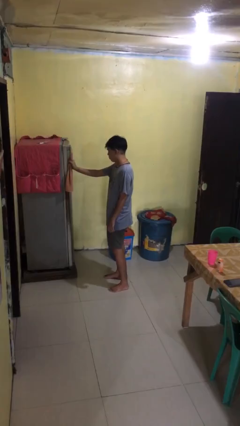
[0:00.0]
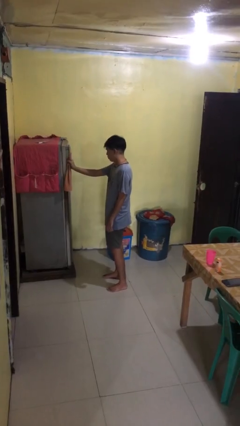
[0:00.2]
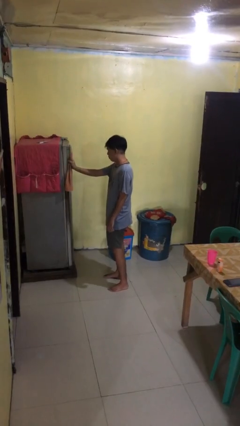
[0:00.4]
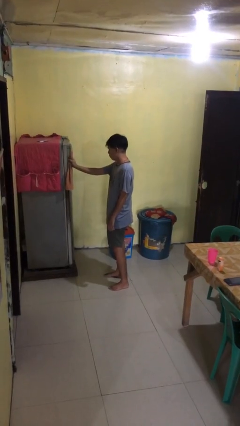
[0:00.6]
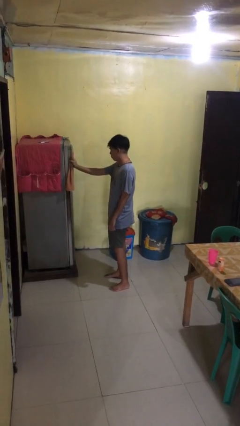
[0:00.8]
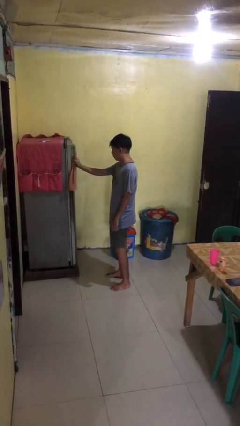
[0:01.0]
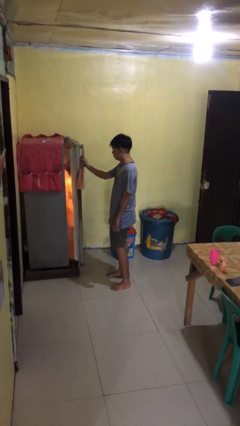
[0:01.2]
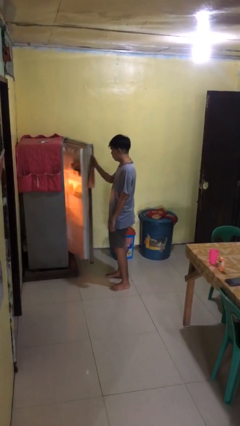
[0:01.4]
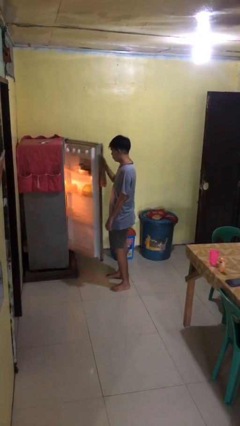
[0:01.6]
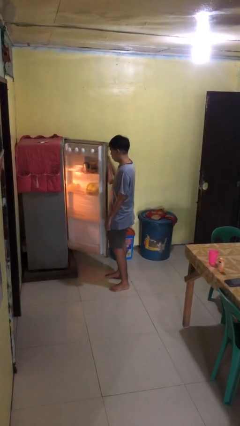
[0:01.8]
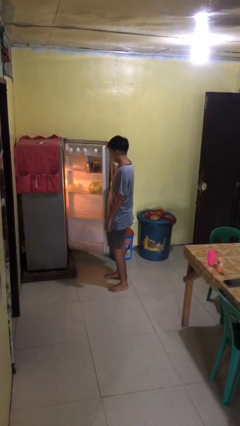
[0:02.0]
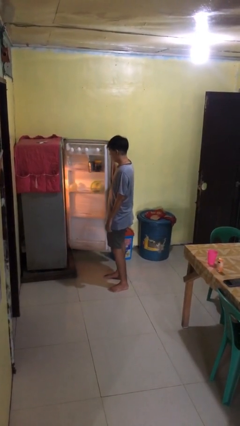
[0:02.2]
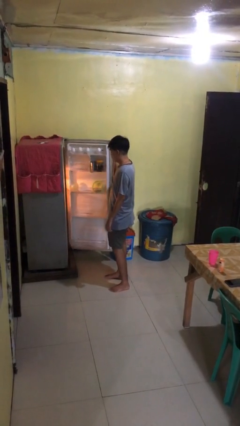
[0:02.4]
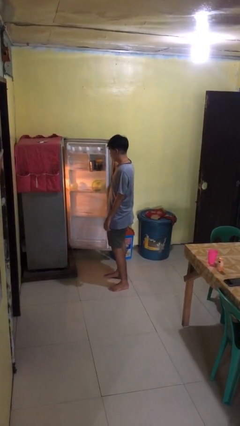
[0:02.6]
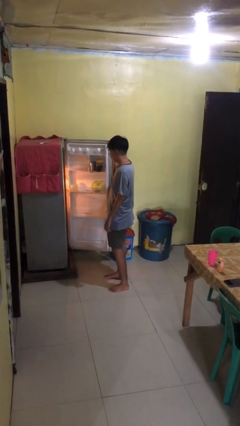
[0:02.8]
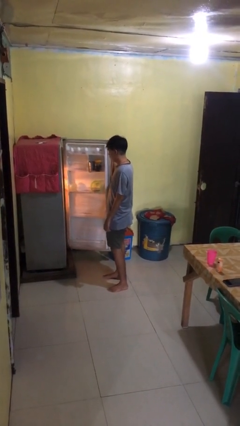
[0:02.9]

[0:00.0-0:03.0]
person opens refrigerator

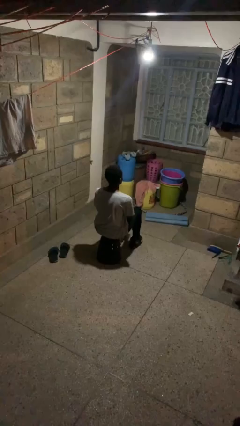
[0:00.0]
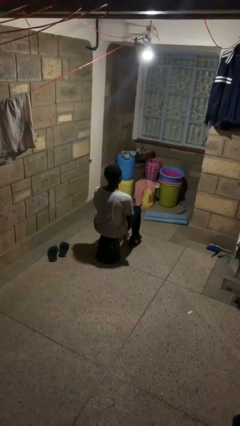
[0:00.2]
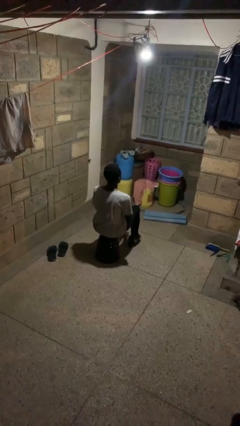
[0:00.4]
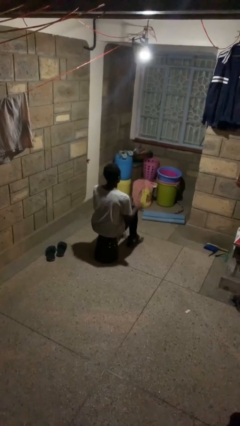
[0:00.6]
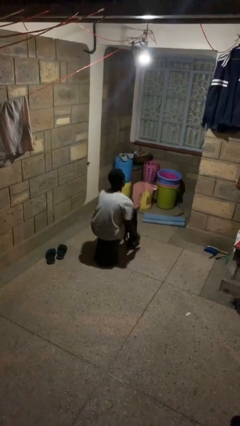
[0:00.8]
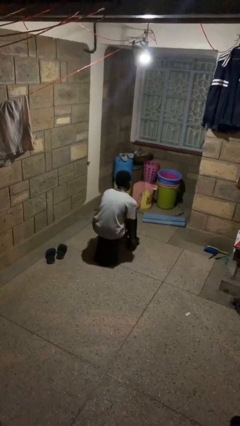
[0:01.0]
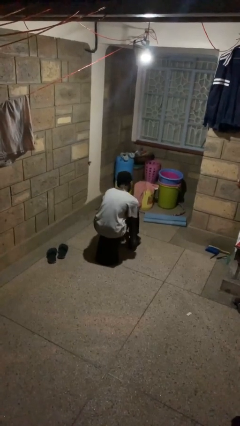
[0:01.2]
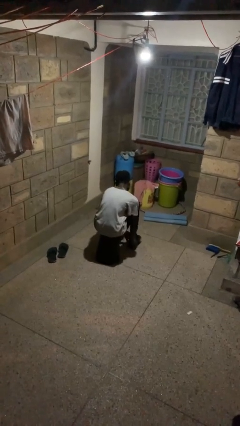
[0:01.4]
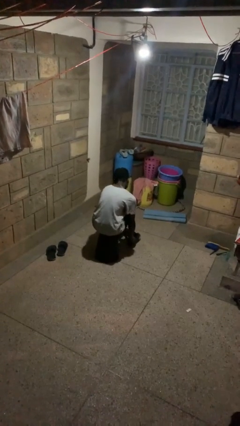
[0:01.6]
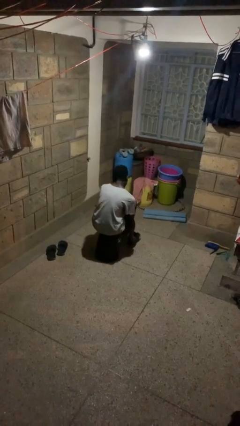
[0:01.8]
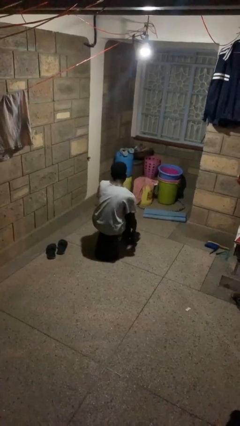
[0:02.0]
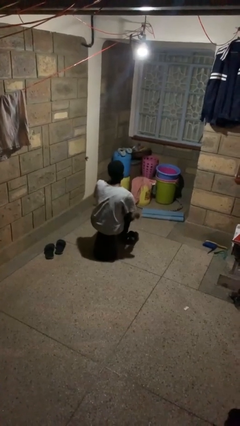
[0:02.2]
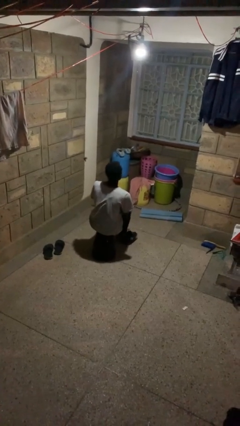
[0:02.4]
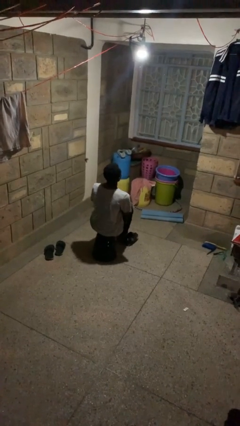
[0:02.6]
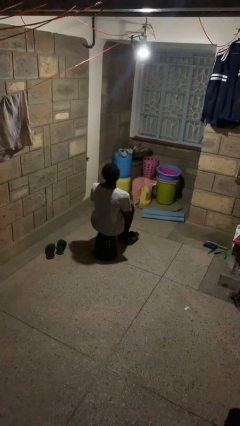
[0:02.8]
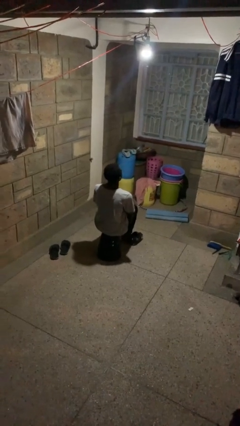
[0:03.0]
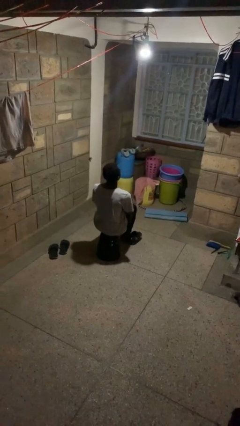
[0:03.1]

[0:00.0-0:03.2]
person takes off shoes

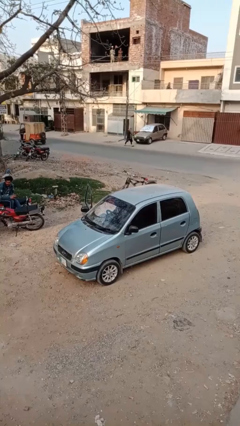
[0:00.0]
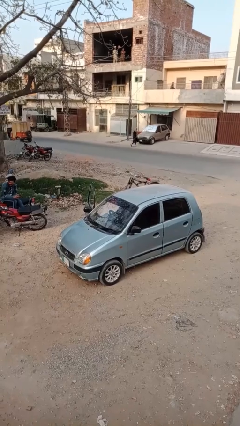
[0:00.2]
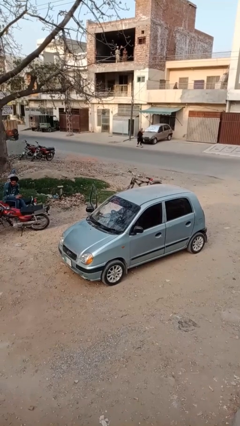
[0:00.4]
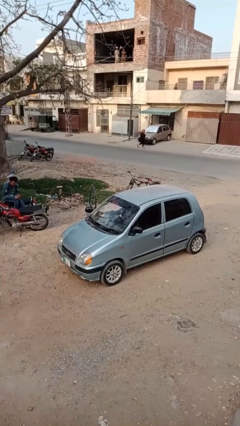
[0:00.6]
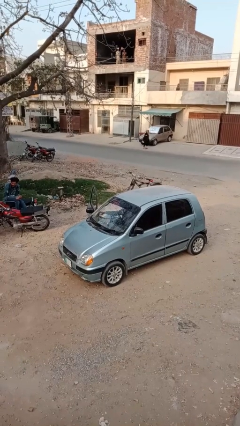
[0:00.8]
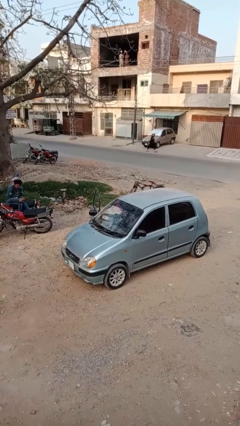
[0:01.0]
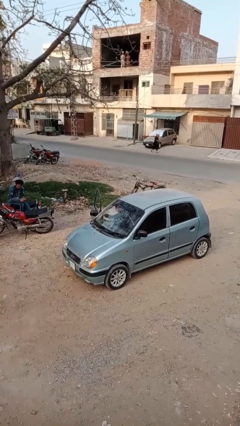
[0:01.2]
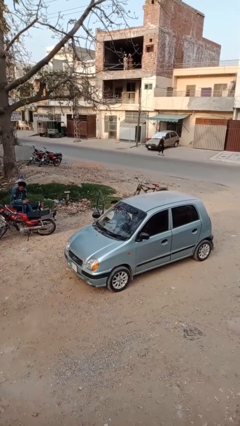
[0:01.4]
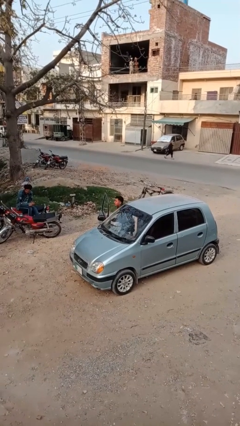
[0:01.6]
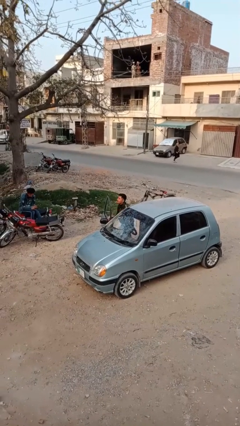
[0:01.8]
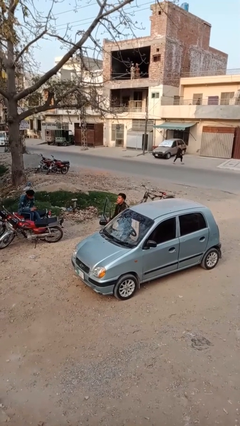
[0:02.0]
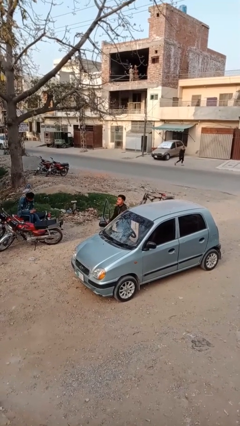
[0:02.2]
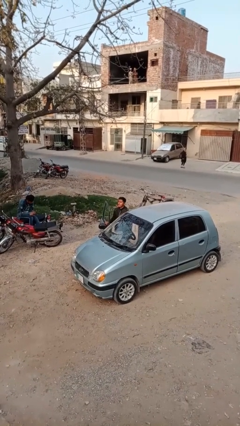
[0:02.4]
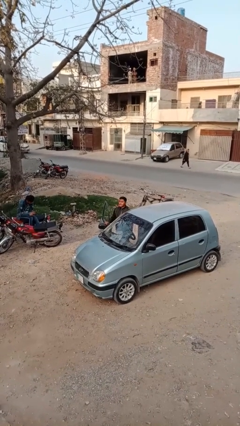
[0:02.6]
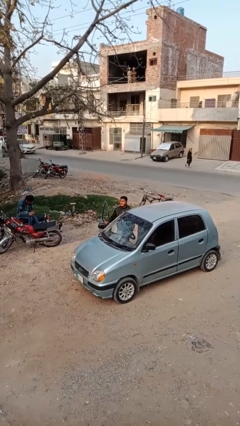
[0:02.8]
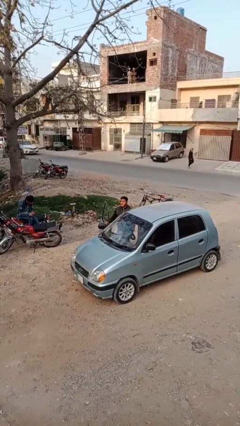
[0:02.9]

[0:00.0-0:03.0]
person exits car

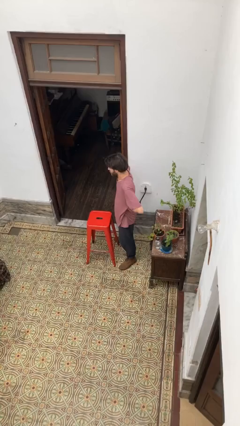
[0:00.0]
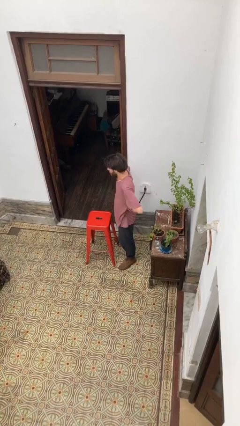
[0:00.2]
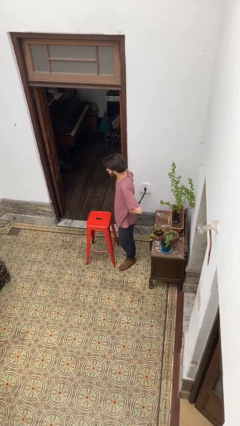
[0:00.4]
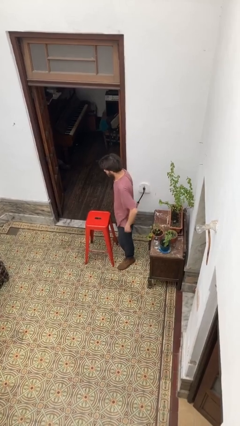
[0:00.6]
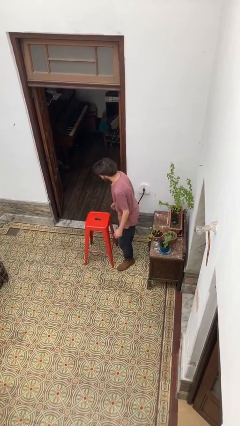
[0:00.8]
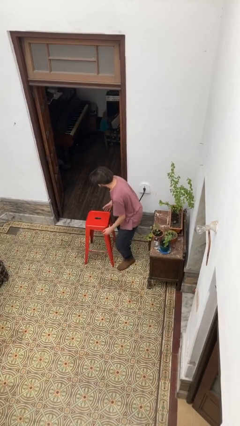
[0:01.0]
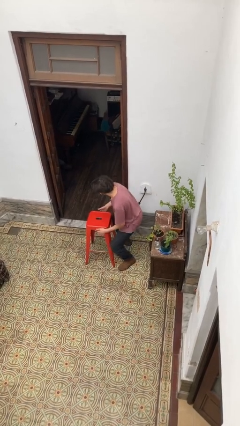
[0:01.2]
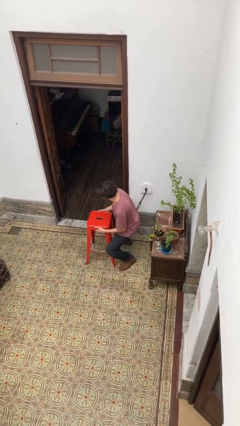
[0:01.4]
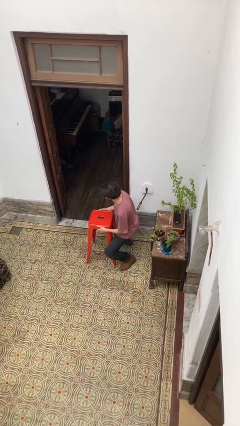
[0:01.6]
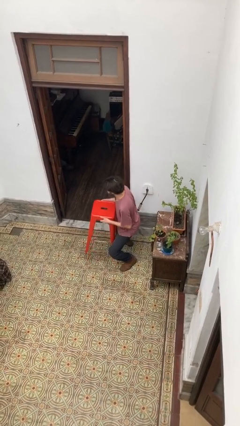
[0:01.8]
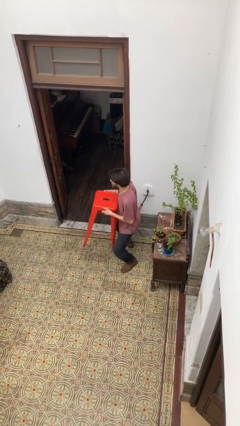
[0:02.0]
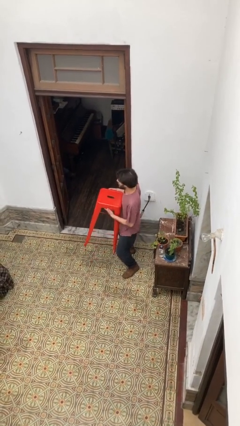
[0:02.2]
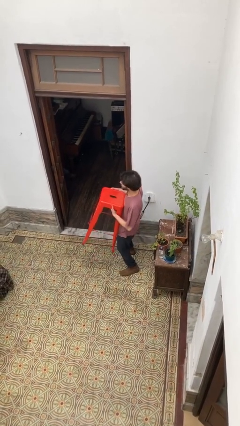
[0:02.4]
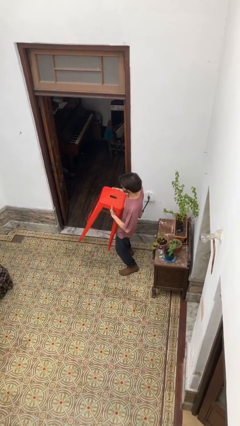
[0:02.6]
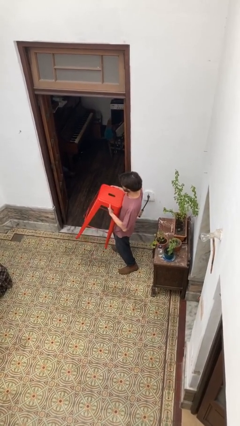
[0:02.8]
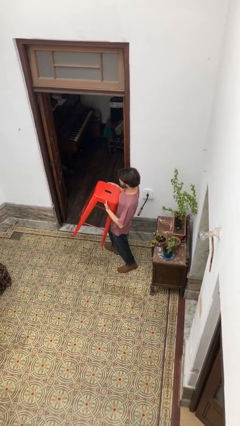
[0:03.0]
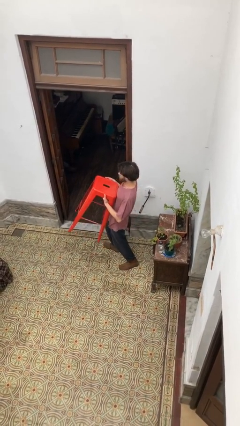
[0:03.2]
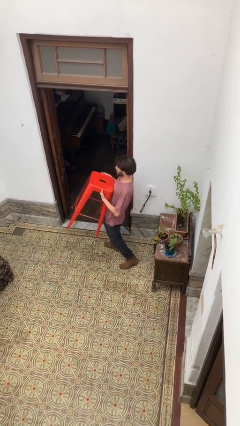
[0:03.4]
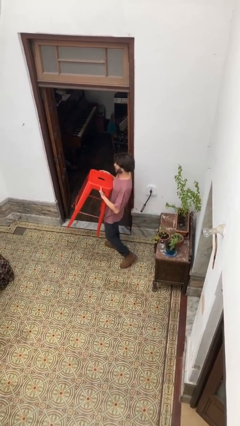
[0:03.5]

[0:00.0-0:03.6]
person picks up object from floor

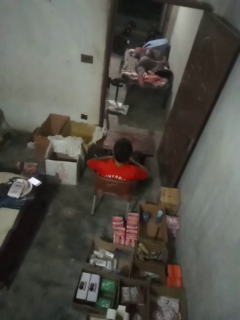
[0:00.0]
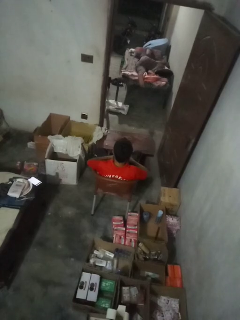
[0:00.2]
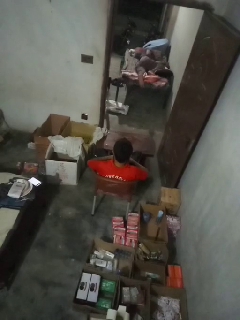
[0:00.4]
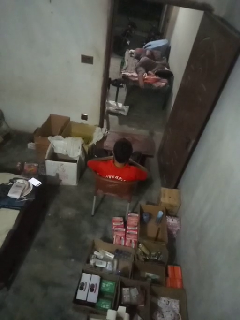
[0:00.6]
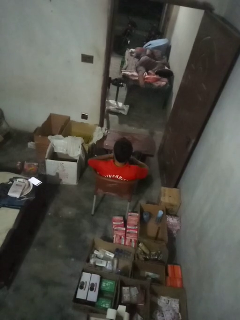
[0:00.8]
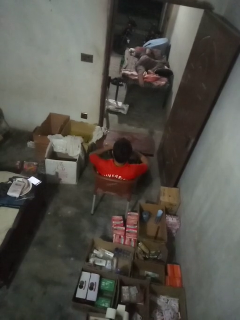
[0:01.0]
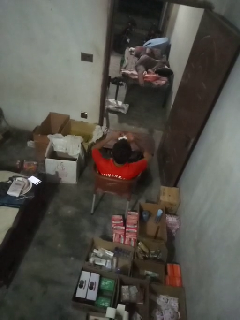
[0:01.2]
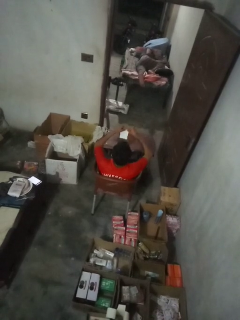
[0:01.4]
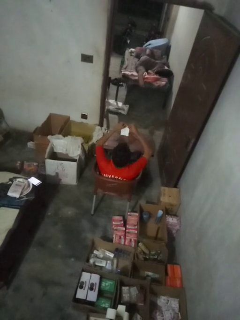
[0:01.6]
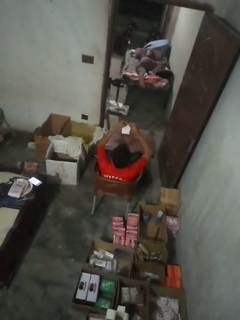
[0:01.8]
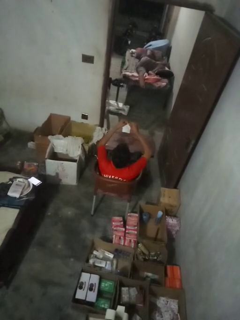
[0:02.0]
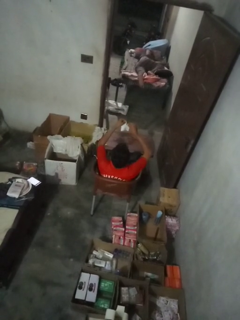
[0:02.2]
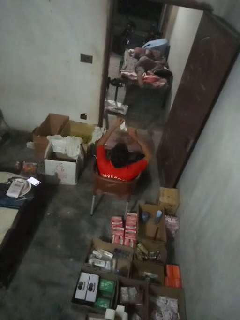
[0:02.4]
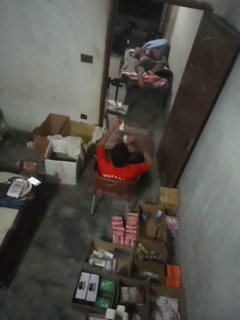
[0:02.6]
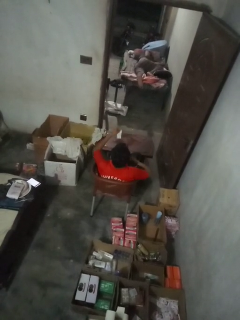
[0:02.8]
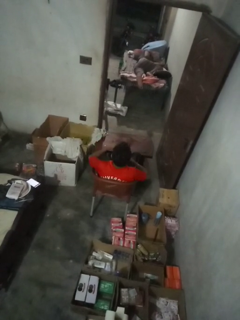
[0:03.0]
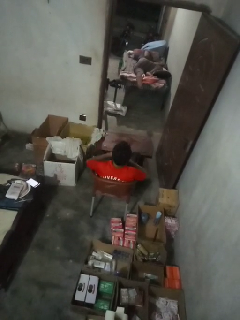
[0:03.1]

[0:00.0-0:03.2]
person tears paper

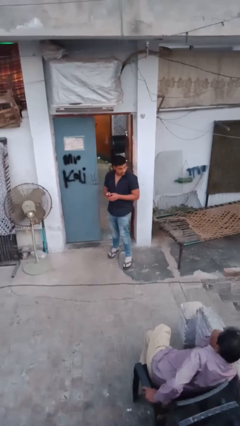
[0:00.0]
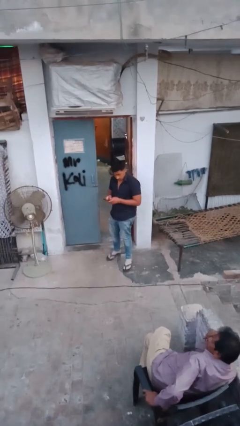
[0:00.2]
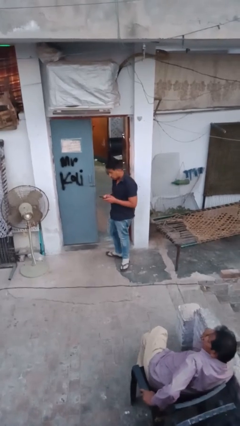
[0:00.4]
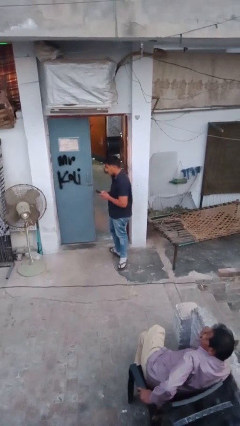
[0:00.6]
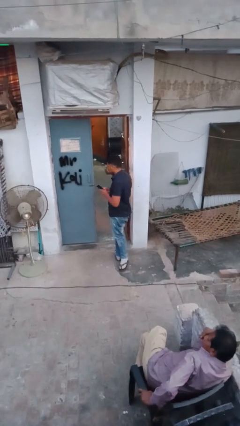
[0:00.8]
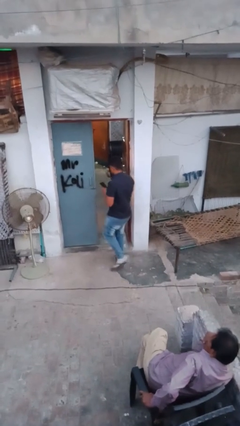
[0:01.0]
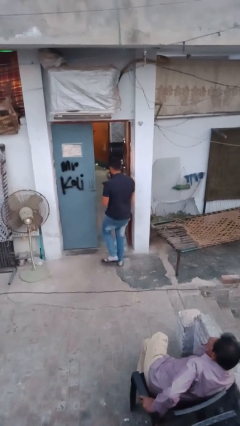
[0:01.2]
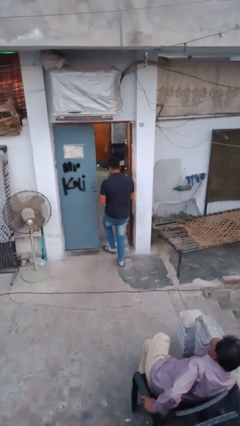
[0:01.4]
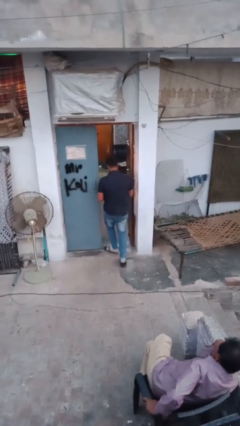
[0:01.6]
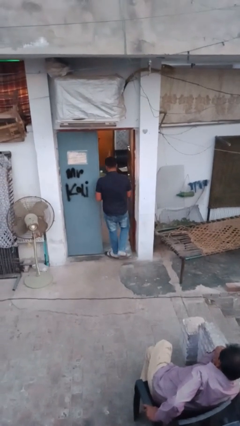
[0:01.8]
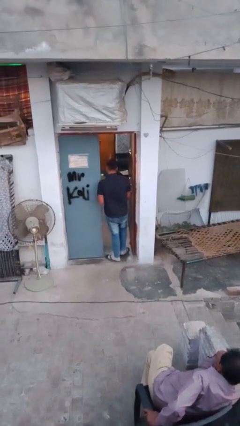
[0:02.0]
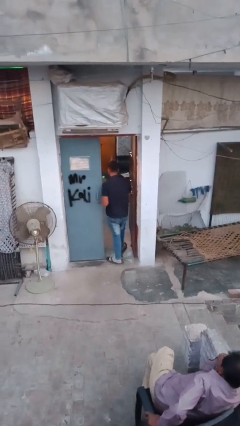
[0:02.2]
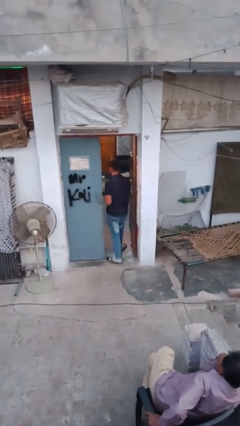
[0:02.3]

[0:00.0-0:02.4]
person exits scene through structure
